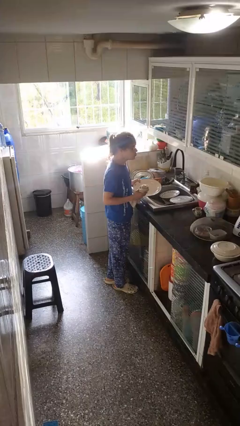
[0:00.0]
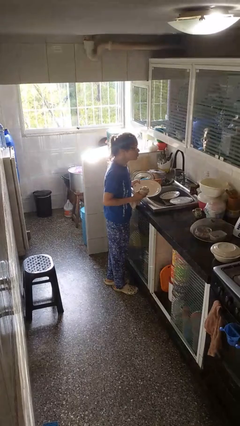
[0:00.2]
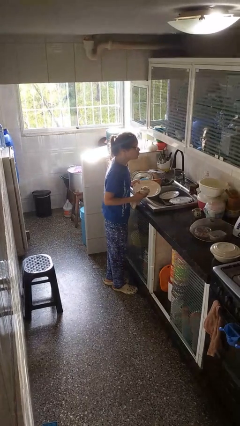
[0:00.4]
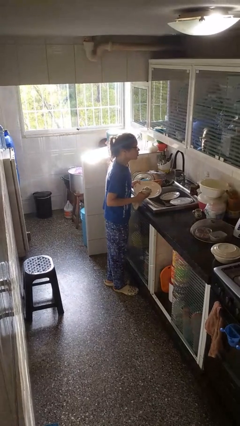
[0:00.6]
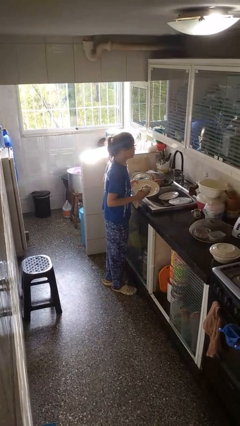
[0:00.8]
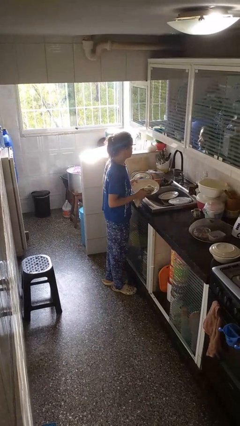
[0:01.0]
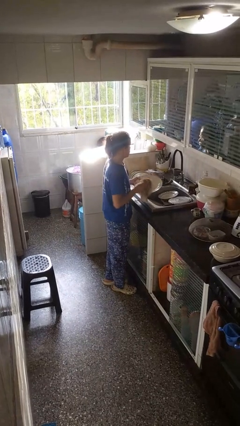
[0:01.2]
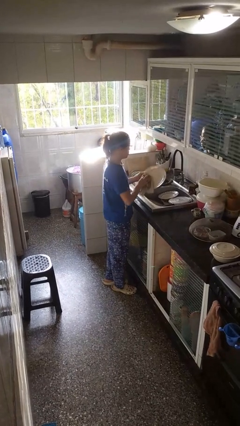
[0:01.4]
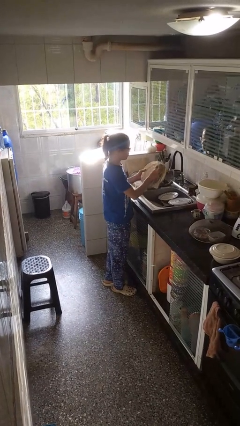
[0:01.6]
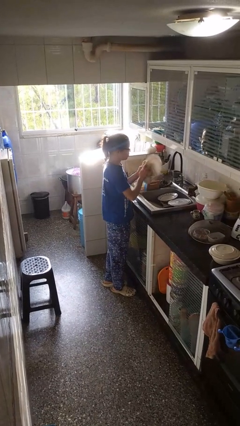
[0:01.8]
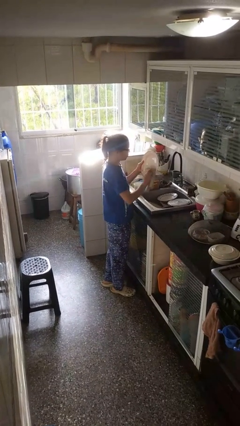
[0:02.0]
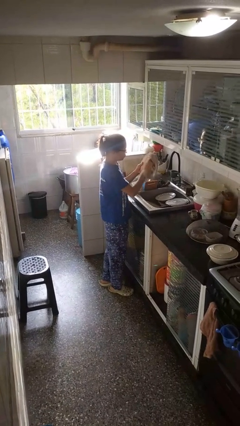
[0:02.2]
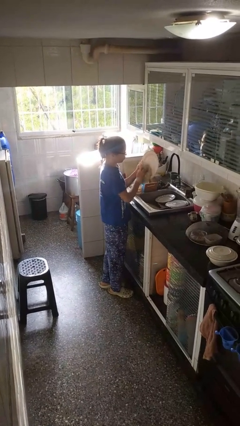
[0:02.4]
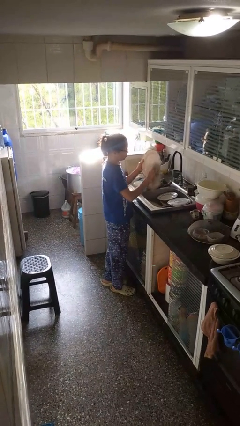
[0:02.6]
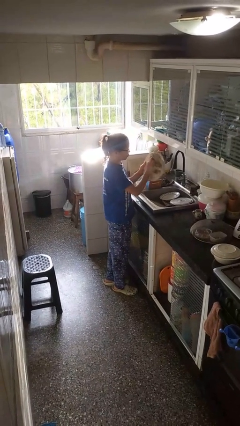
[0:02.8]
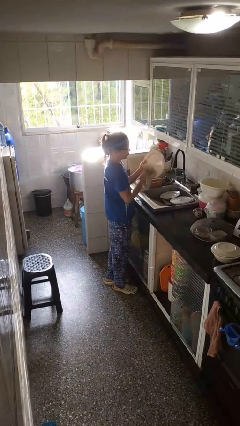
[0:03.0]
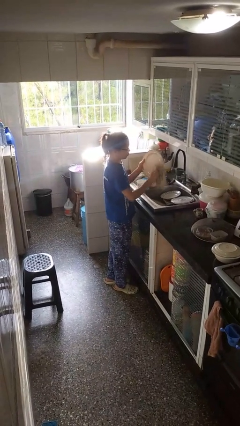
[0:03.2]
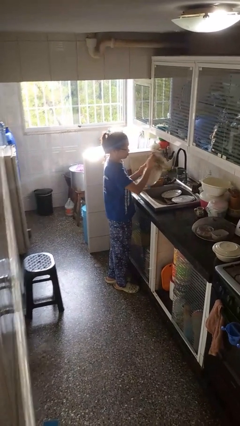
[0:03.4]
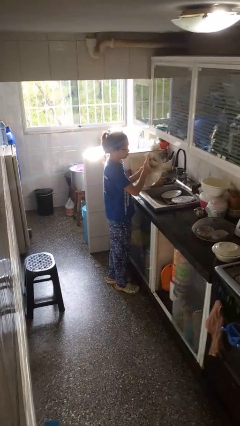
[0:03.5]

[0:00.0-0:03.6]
person dries dish

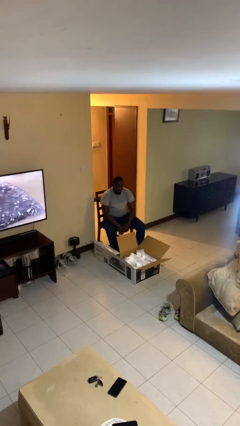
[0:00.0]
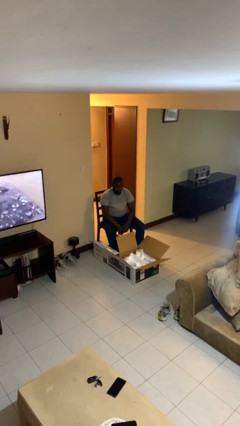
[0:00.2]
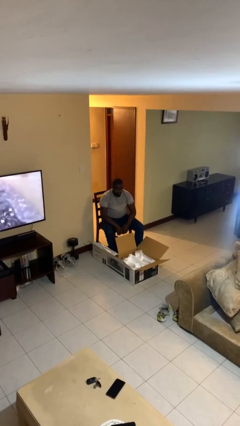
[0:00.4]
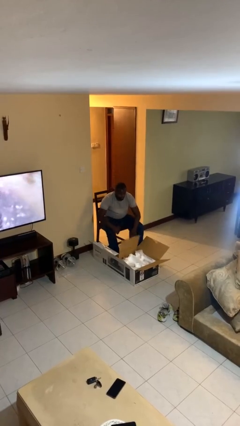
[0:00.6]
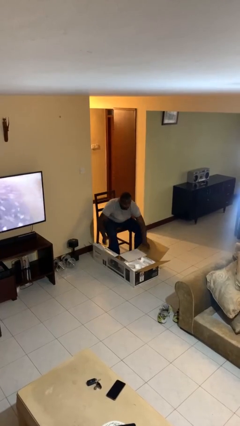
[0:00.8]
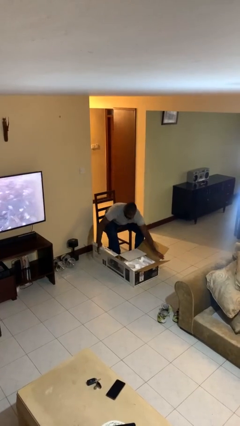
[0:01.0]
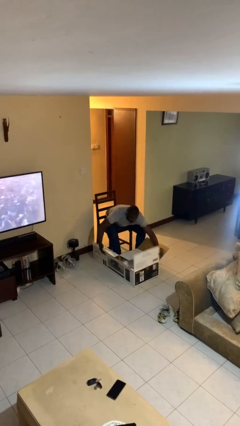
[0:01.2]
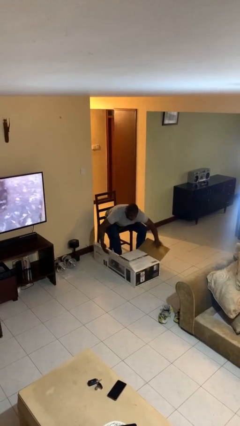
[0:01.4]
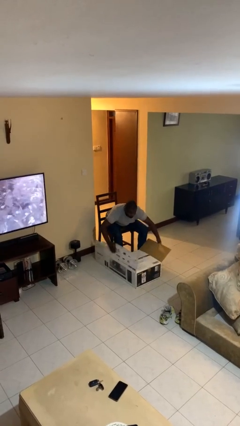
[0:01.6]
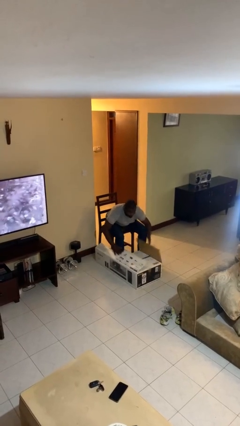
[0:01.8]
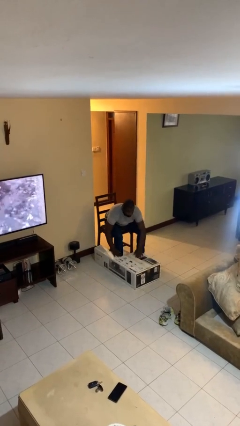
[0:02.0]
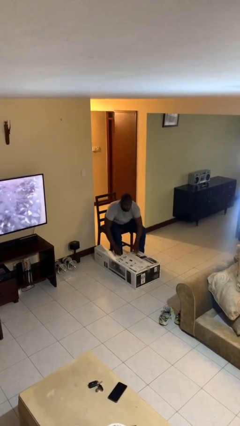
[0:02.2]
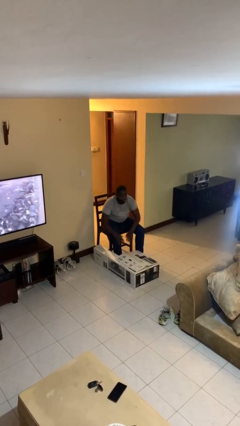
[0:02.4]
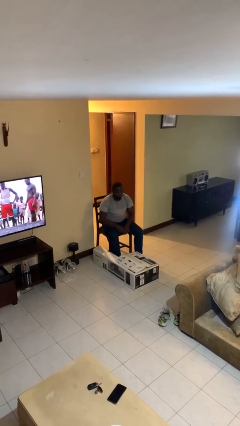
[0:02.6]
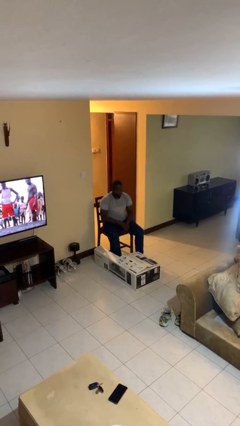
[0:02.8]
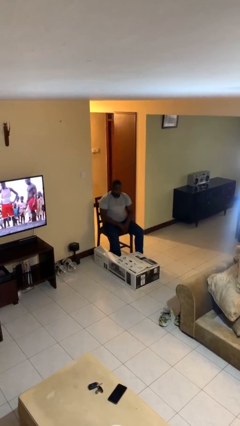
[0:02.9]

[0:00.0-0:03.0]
person closes box

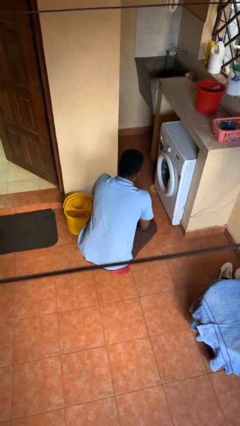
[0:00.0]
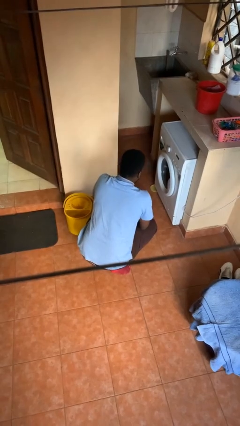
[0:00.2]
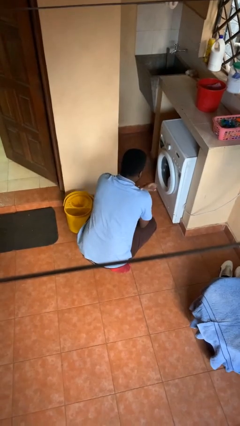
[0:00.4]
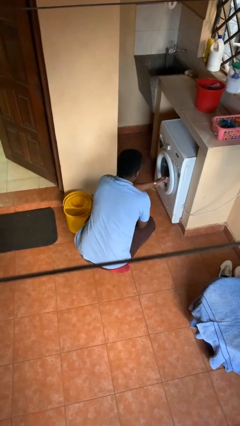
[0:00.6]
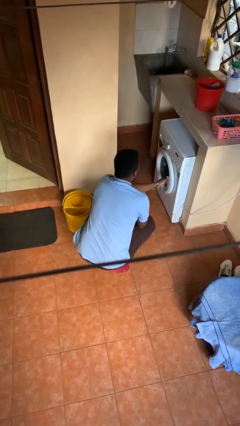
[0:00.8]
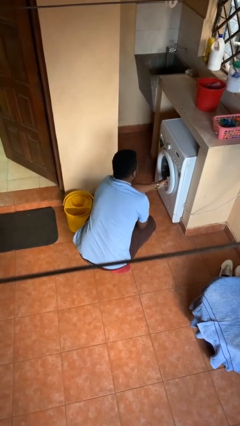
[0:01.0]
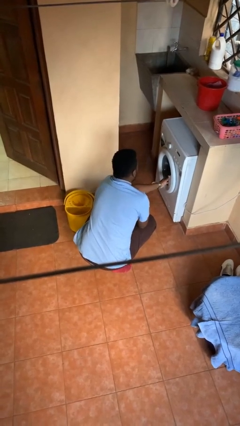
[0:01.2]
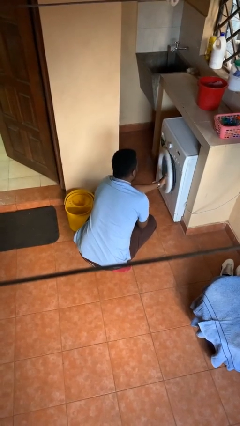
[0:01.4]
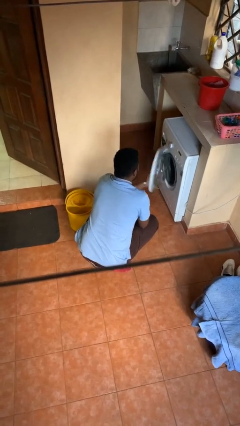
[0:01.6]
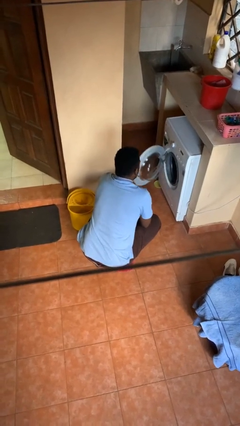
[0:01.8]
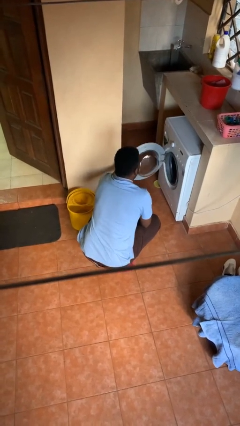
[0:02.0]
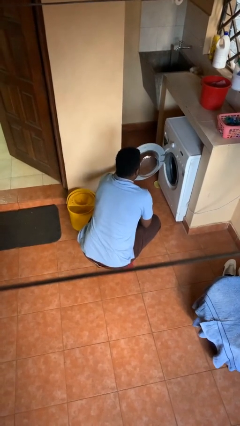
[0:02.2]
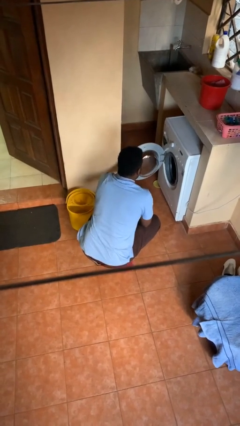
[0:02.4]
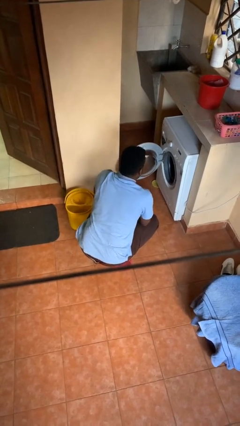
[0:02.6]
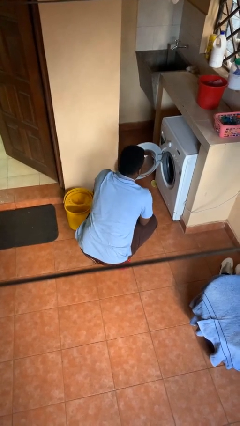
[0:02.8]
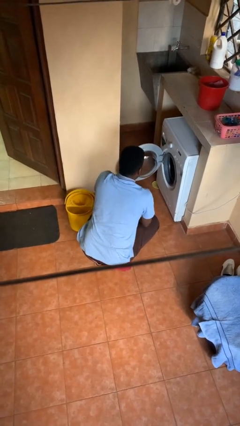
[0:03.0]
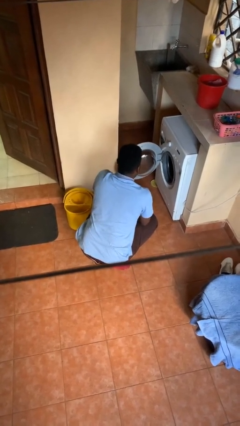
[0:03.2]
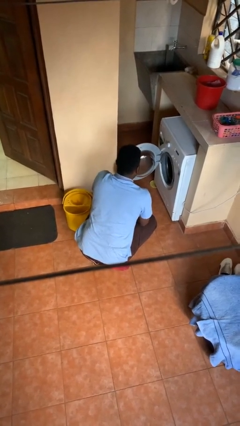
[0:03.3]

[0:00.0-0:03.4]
person opens clothes washer

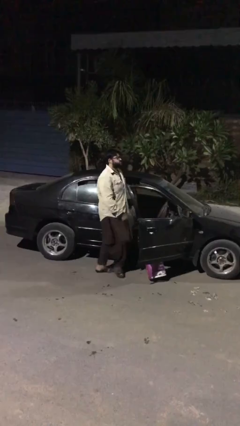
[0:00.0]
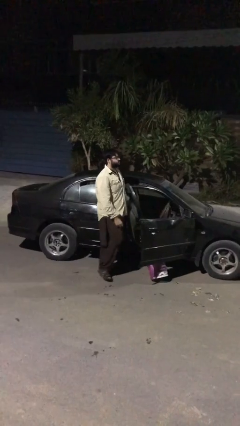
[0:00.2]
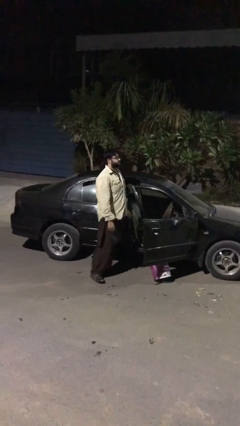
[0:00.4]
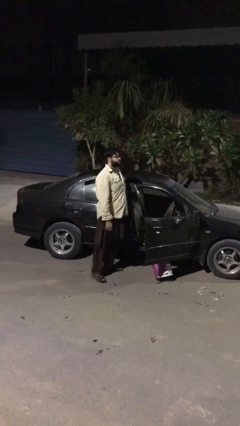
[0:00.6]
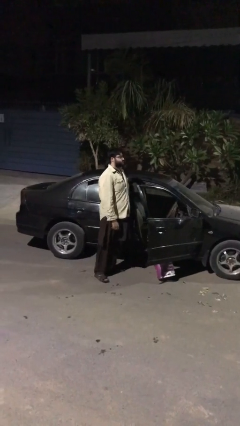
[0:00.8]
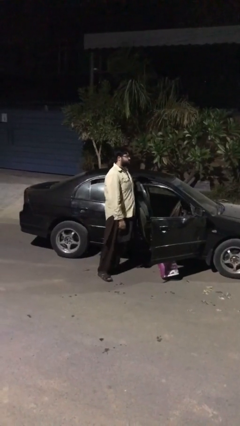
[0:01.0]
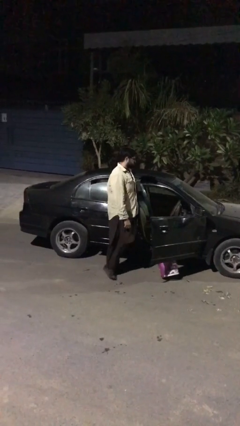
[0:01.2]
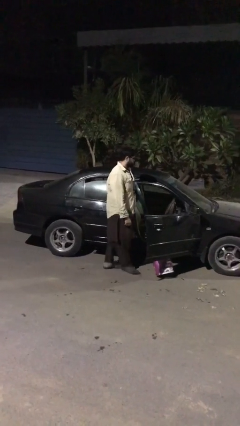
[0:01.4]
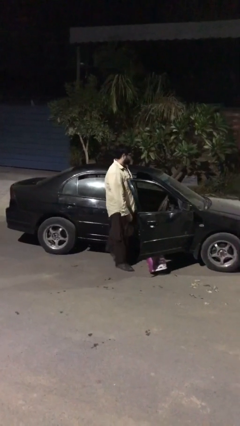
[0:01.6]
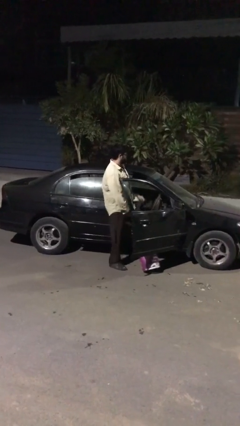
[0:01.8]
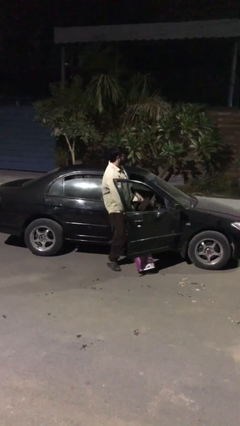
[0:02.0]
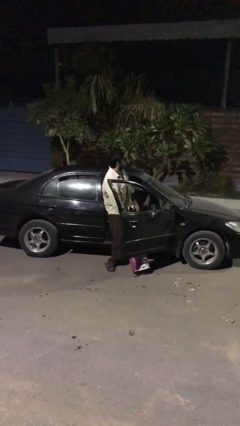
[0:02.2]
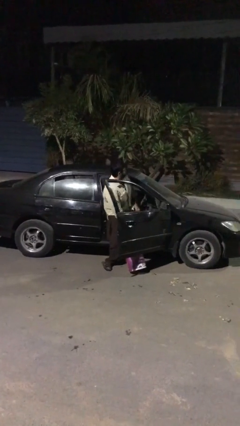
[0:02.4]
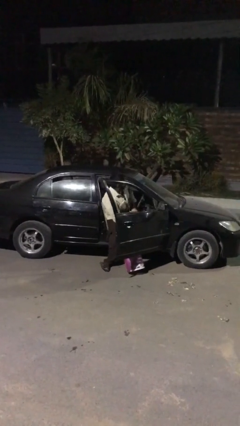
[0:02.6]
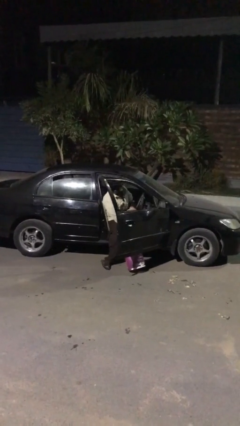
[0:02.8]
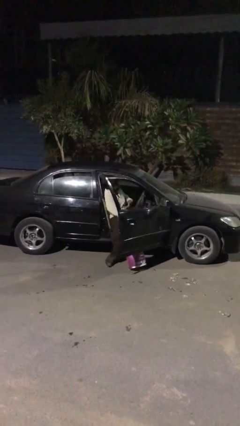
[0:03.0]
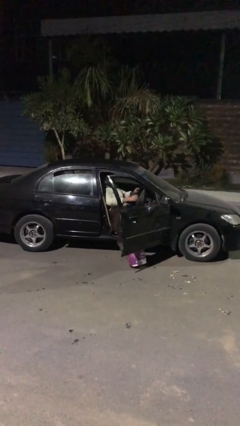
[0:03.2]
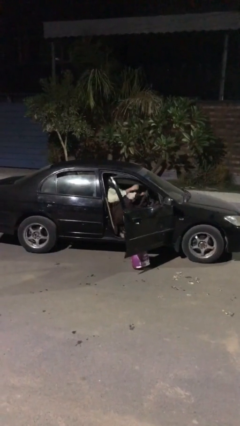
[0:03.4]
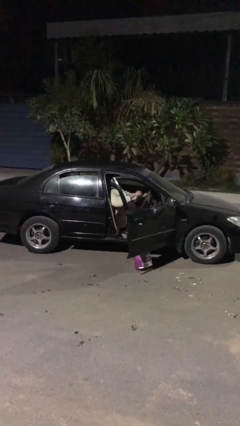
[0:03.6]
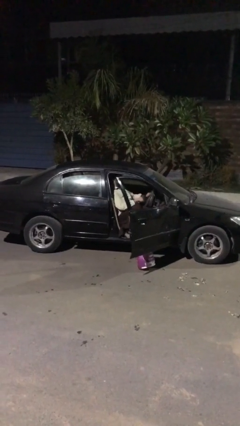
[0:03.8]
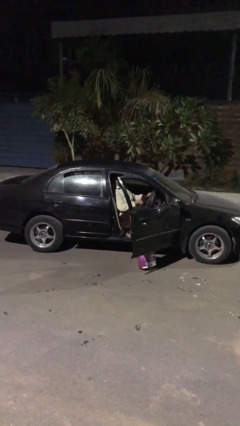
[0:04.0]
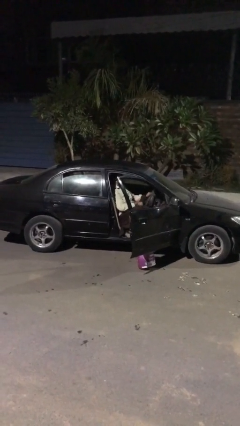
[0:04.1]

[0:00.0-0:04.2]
person enters car

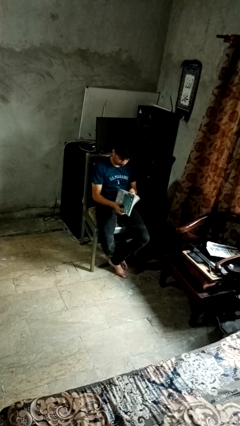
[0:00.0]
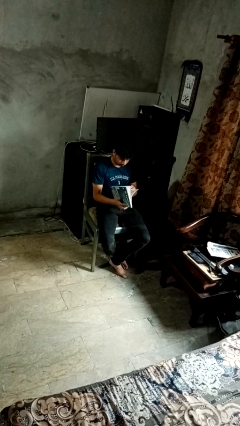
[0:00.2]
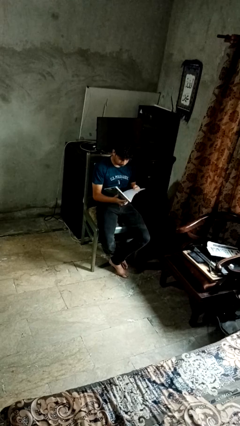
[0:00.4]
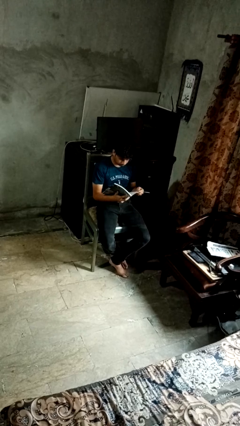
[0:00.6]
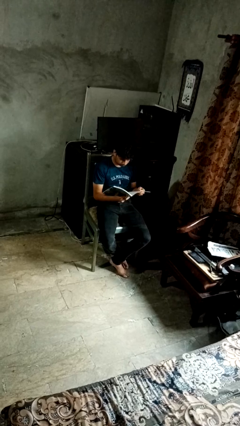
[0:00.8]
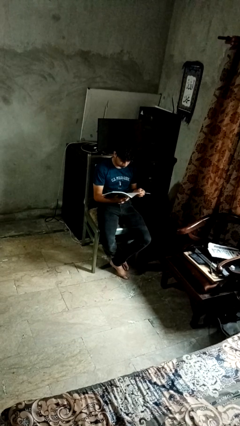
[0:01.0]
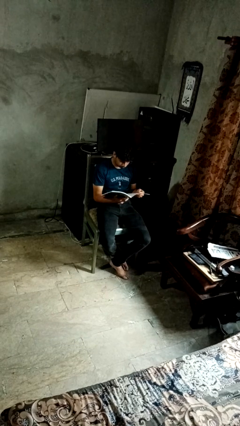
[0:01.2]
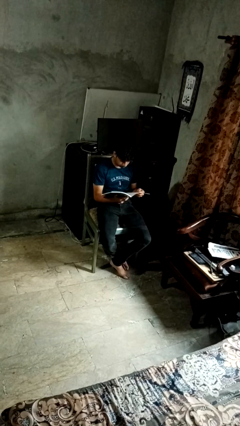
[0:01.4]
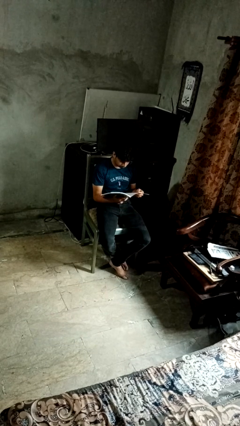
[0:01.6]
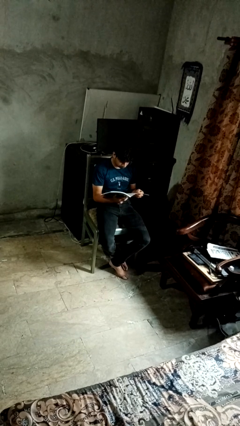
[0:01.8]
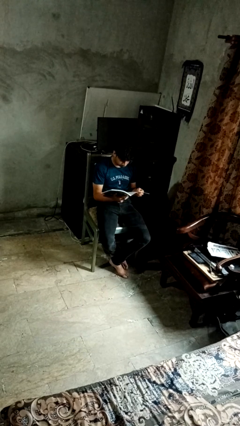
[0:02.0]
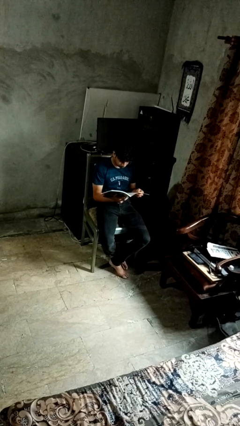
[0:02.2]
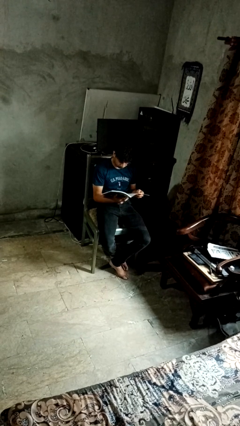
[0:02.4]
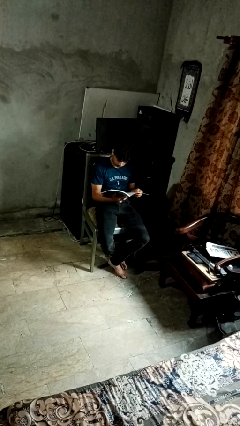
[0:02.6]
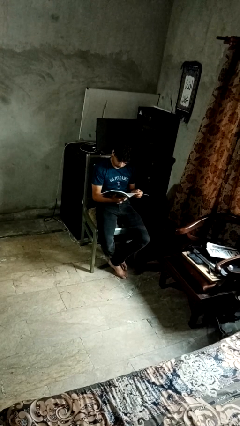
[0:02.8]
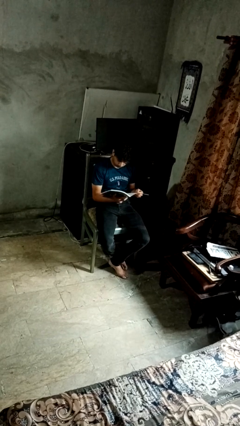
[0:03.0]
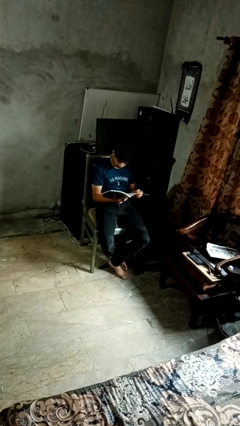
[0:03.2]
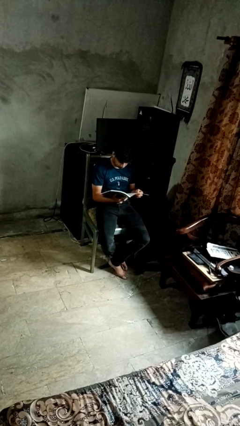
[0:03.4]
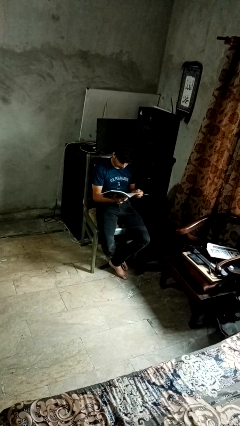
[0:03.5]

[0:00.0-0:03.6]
person reads book

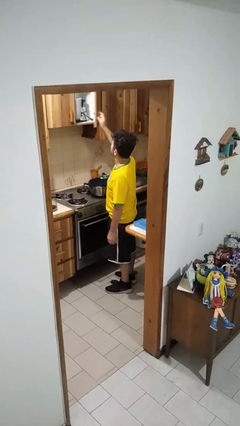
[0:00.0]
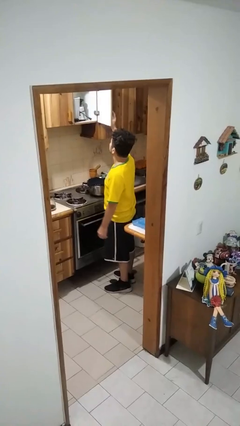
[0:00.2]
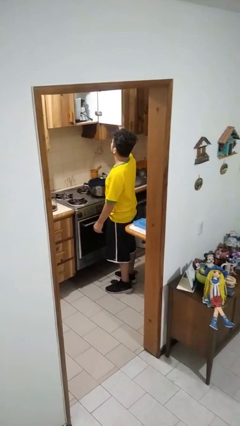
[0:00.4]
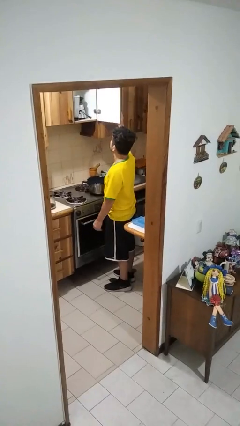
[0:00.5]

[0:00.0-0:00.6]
person opens cabinet
